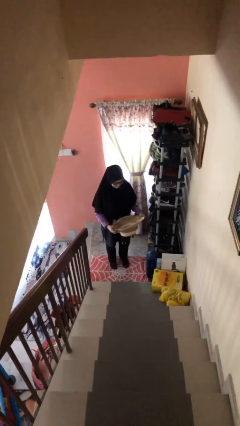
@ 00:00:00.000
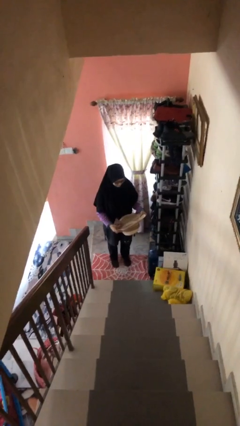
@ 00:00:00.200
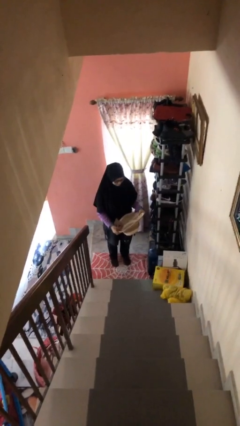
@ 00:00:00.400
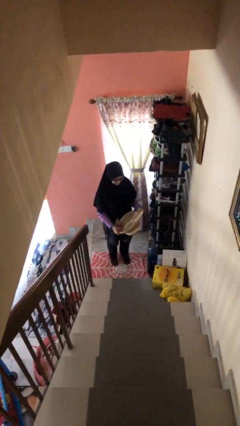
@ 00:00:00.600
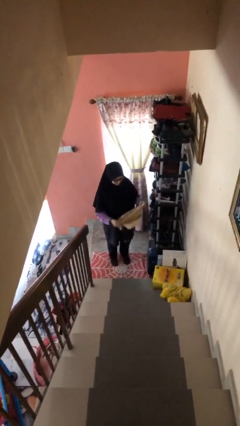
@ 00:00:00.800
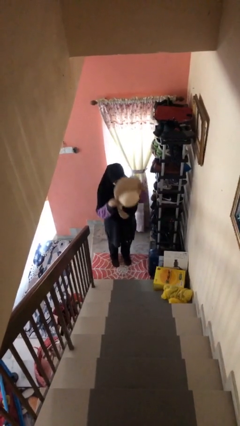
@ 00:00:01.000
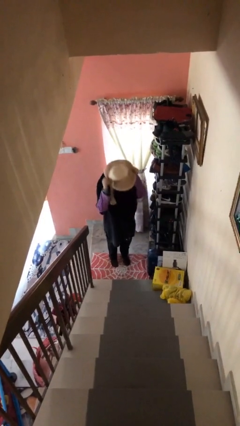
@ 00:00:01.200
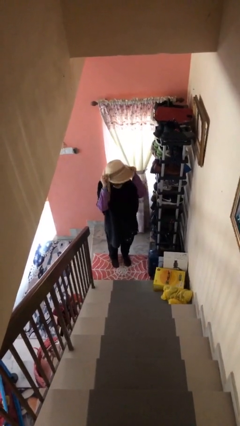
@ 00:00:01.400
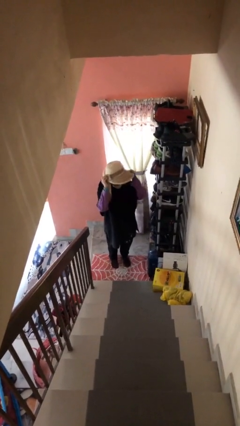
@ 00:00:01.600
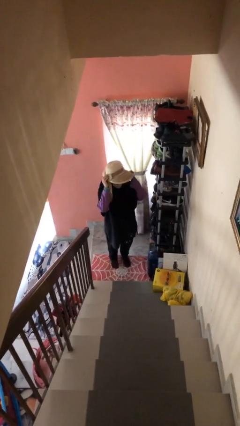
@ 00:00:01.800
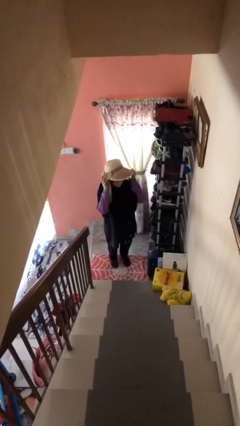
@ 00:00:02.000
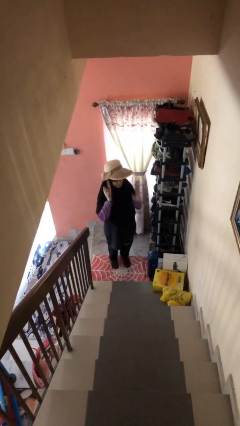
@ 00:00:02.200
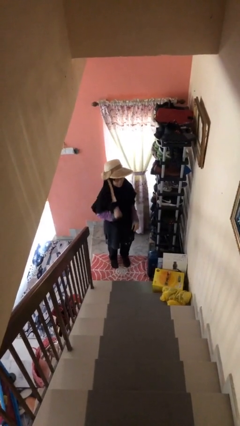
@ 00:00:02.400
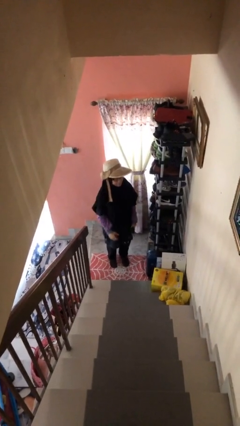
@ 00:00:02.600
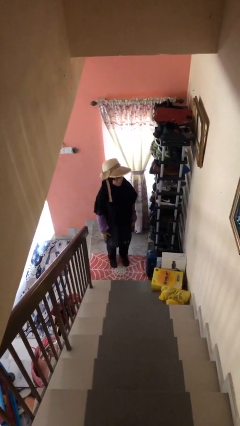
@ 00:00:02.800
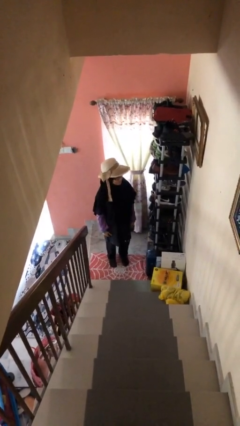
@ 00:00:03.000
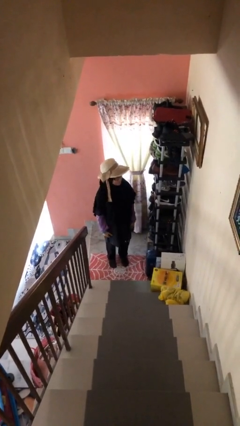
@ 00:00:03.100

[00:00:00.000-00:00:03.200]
person puts on hat

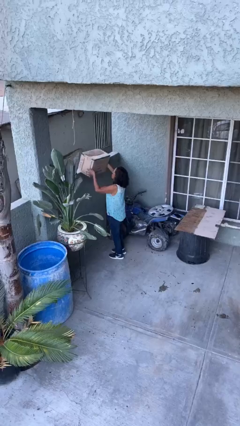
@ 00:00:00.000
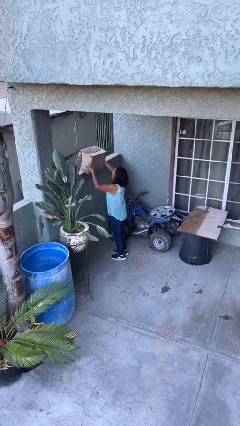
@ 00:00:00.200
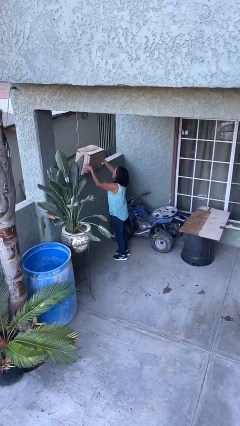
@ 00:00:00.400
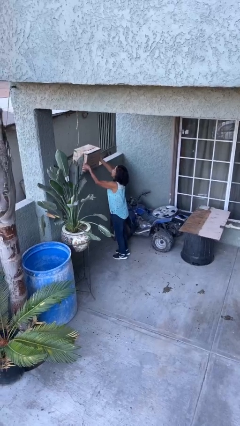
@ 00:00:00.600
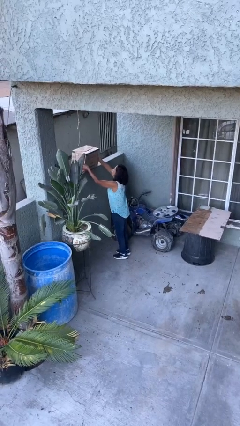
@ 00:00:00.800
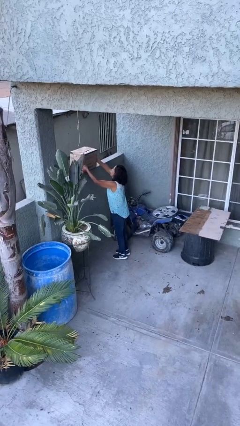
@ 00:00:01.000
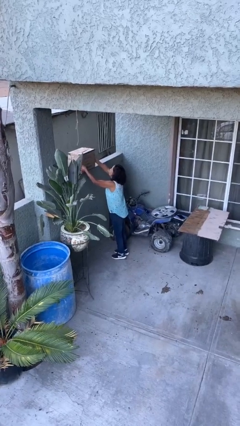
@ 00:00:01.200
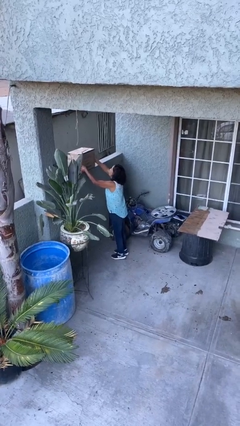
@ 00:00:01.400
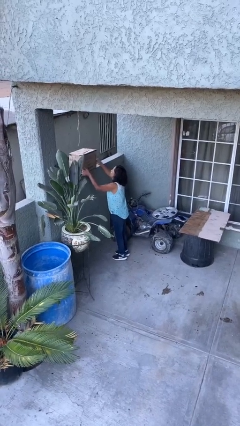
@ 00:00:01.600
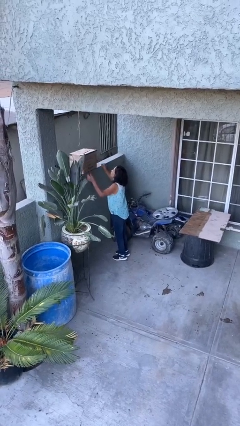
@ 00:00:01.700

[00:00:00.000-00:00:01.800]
person puts down object on shelf

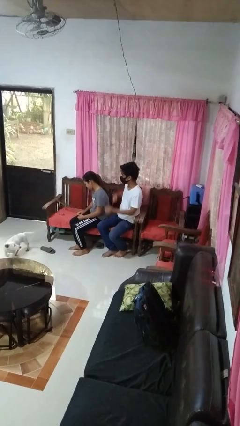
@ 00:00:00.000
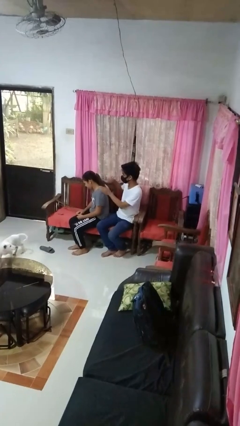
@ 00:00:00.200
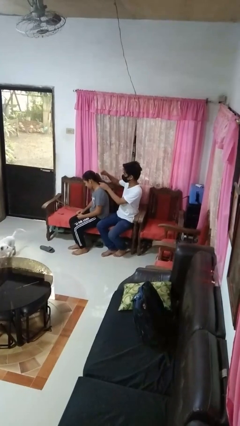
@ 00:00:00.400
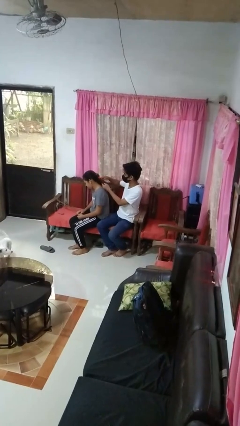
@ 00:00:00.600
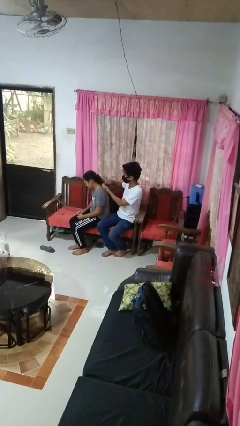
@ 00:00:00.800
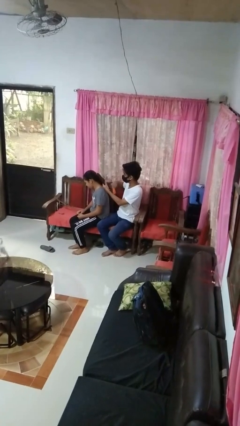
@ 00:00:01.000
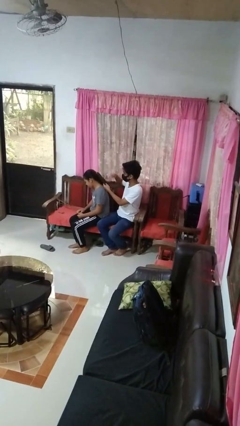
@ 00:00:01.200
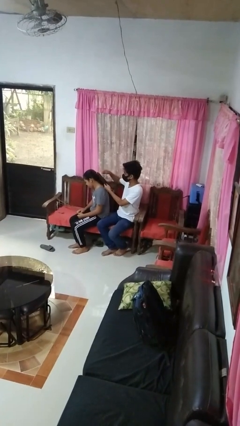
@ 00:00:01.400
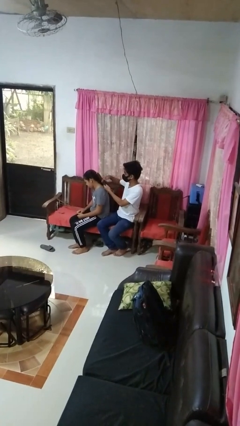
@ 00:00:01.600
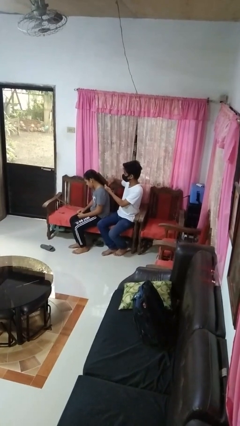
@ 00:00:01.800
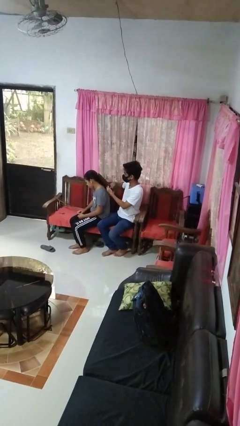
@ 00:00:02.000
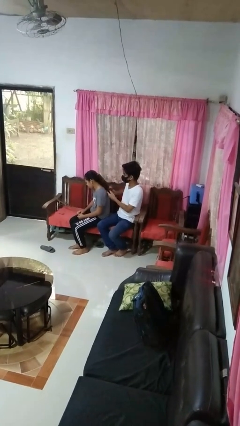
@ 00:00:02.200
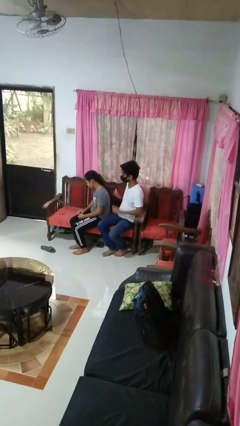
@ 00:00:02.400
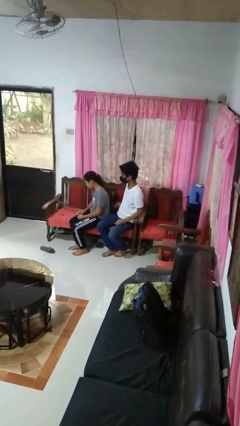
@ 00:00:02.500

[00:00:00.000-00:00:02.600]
person brushes hair of person

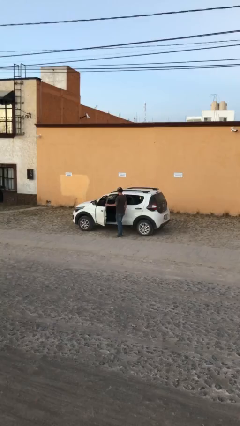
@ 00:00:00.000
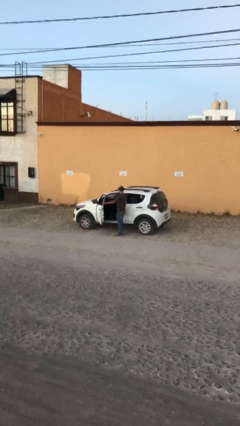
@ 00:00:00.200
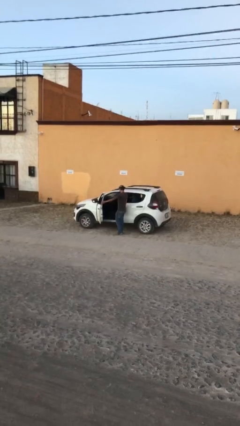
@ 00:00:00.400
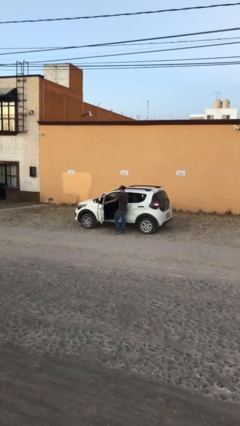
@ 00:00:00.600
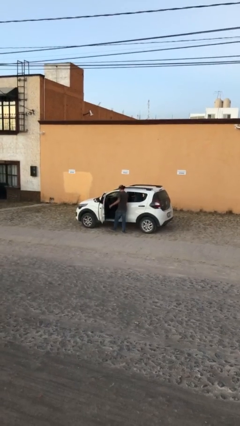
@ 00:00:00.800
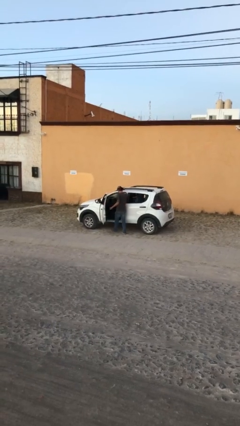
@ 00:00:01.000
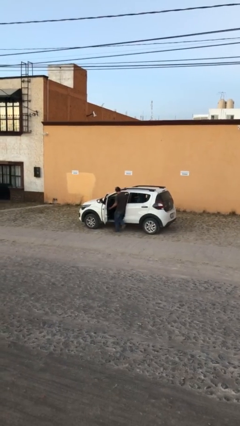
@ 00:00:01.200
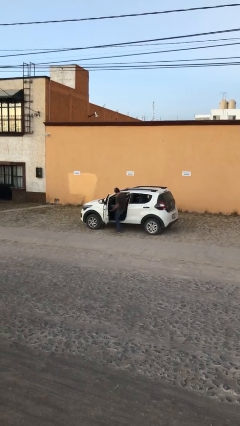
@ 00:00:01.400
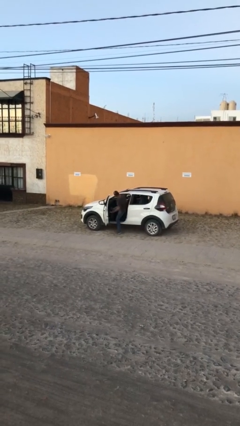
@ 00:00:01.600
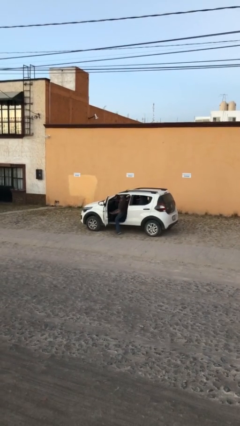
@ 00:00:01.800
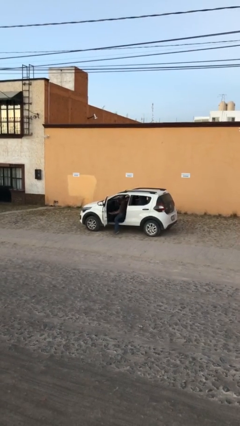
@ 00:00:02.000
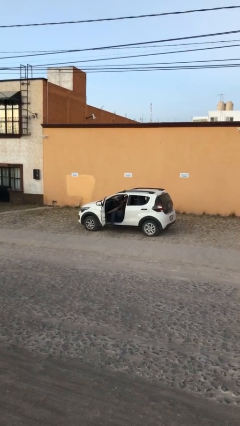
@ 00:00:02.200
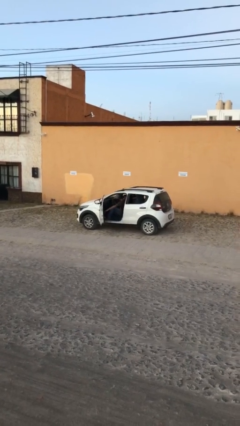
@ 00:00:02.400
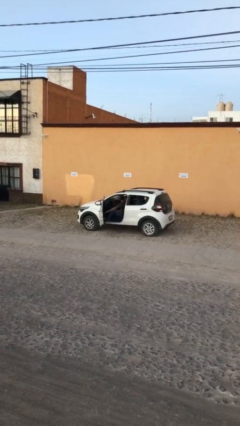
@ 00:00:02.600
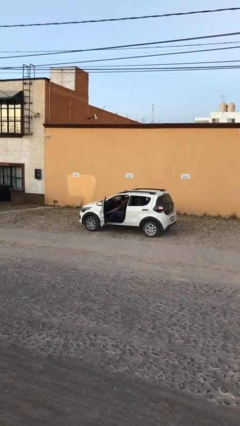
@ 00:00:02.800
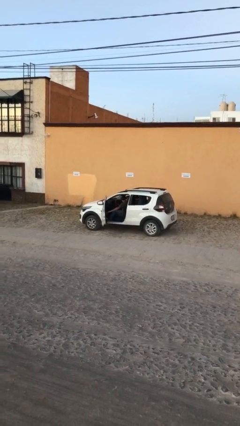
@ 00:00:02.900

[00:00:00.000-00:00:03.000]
person enters car

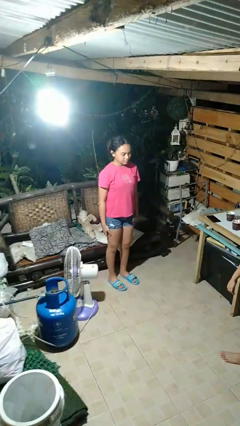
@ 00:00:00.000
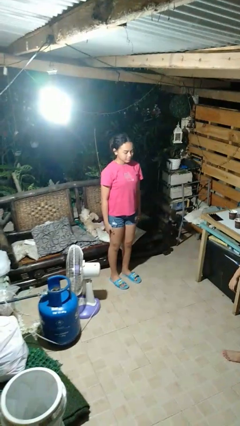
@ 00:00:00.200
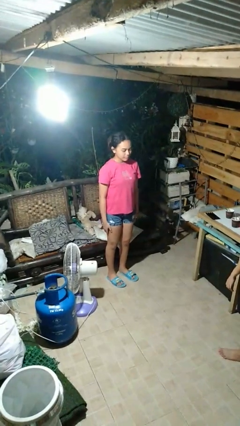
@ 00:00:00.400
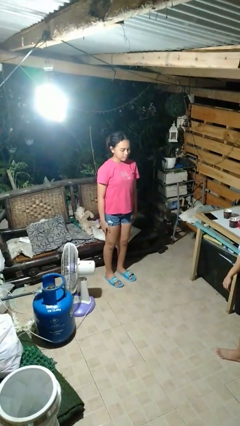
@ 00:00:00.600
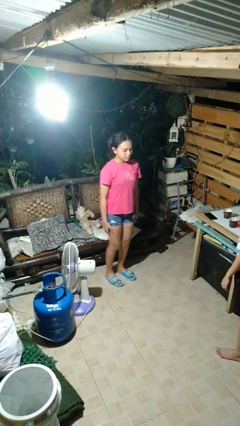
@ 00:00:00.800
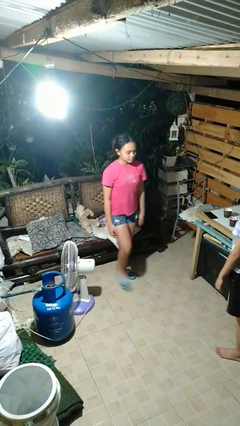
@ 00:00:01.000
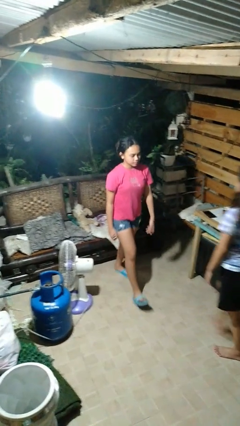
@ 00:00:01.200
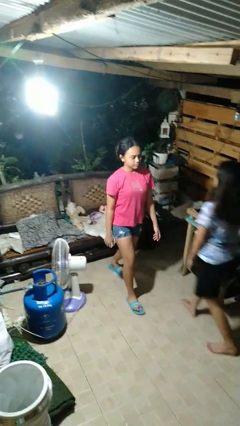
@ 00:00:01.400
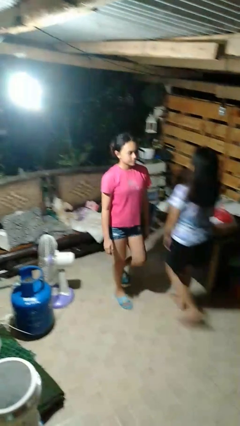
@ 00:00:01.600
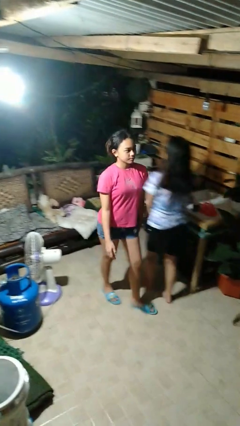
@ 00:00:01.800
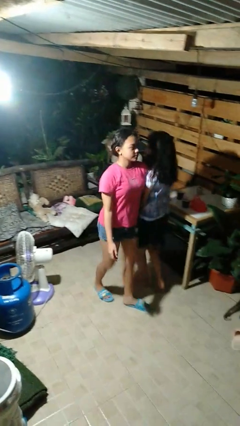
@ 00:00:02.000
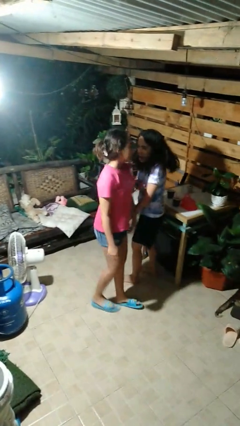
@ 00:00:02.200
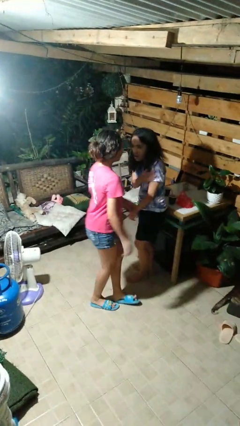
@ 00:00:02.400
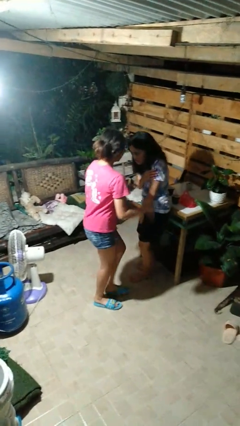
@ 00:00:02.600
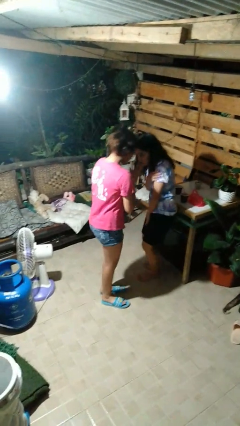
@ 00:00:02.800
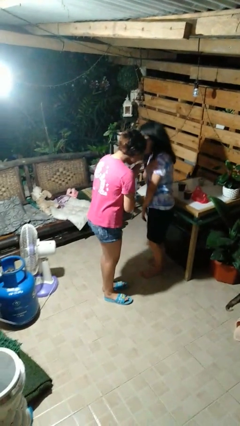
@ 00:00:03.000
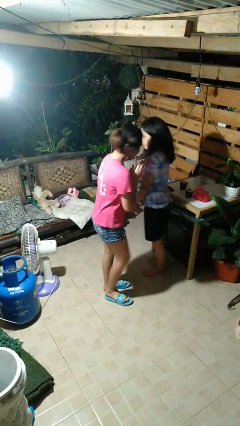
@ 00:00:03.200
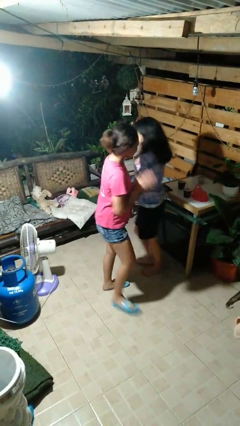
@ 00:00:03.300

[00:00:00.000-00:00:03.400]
person bumps into person

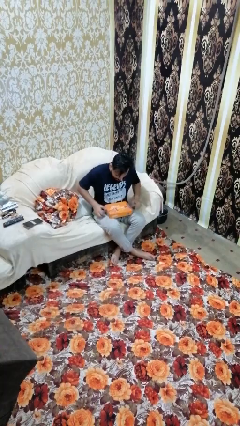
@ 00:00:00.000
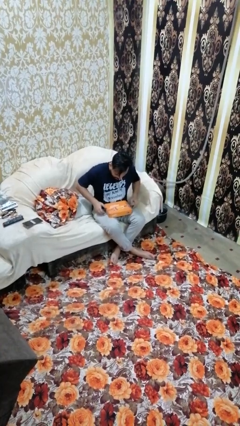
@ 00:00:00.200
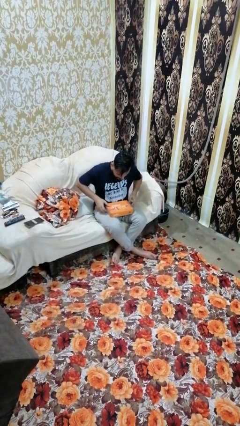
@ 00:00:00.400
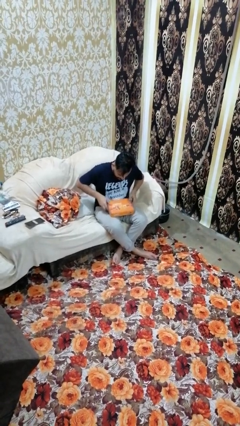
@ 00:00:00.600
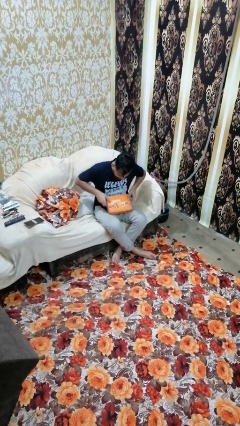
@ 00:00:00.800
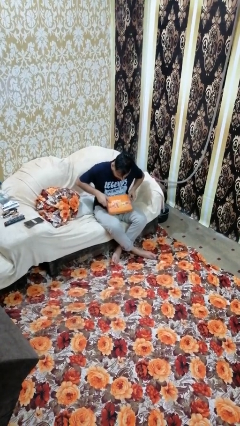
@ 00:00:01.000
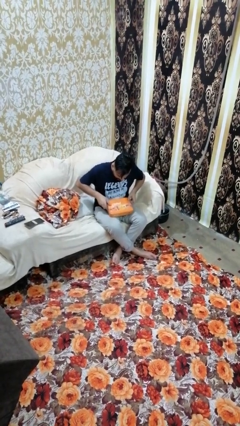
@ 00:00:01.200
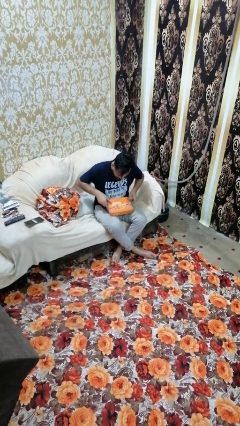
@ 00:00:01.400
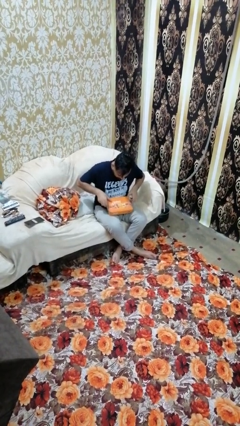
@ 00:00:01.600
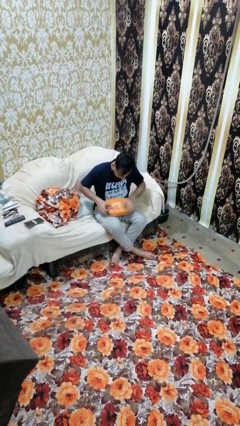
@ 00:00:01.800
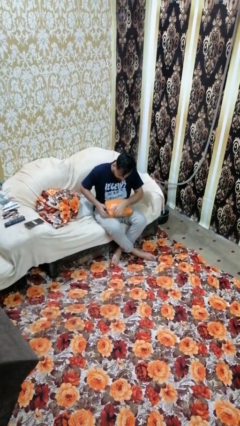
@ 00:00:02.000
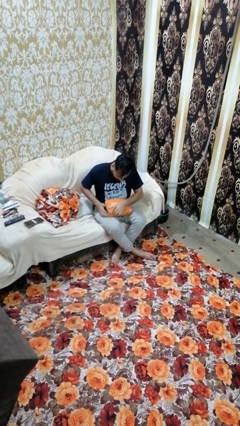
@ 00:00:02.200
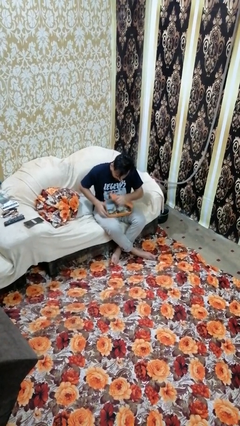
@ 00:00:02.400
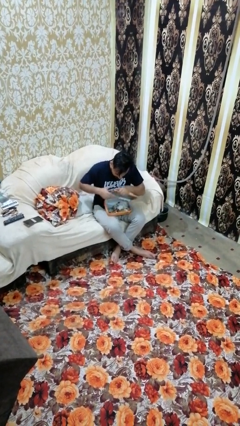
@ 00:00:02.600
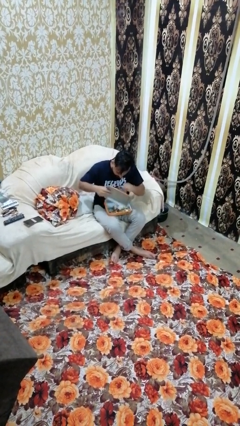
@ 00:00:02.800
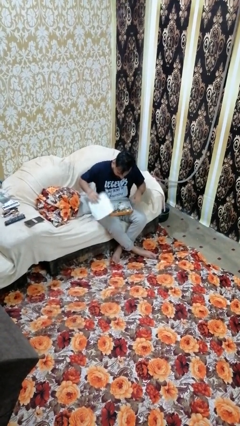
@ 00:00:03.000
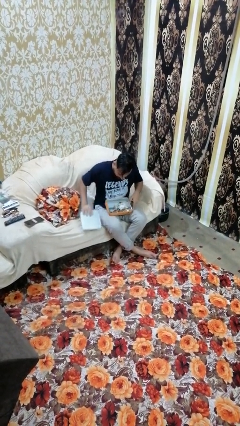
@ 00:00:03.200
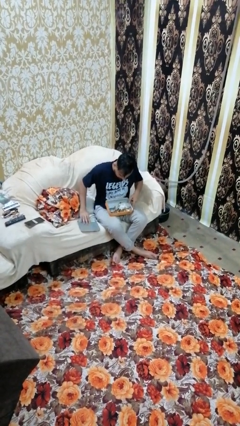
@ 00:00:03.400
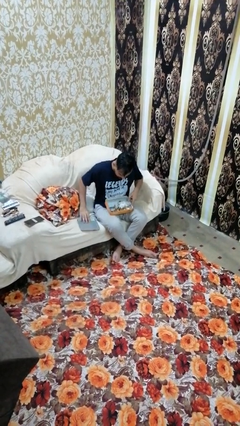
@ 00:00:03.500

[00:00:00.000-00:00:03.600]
person opens jewelry box
